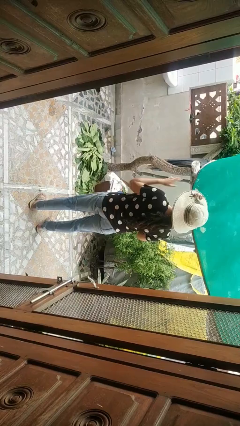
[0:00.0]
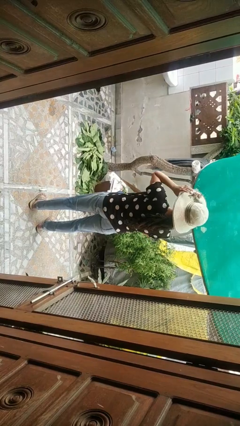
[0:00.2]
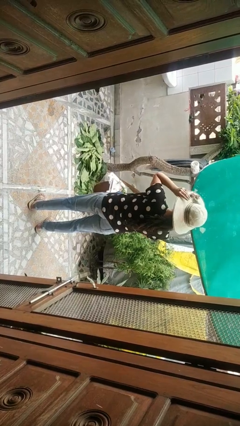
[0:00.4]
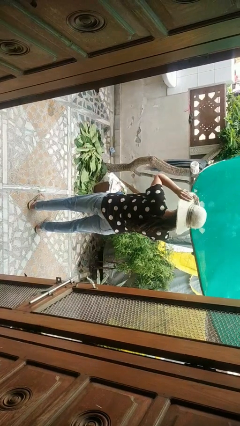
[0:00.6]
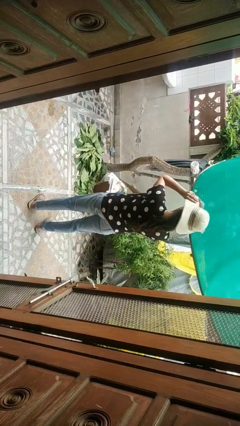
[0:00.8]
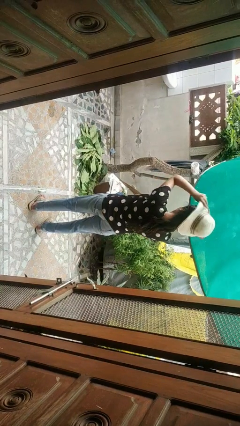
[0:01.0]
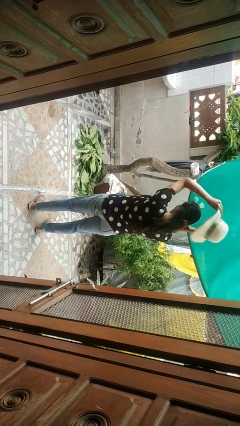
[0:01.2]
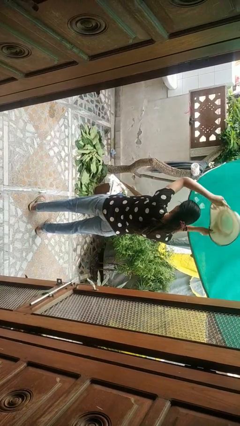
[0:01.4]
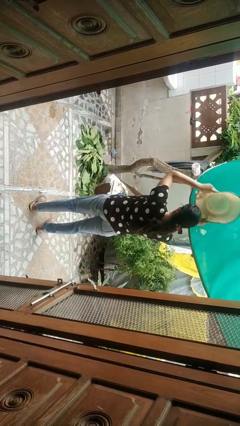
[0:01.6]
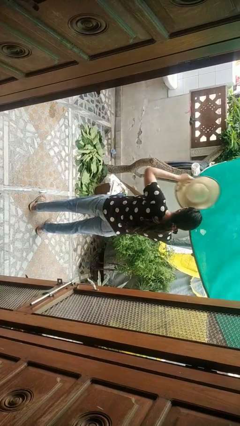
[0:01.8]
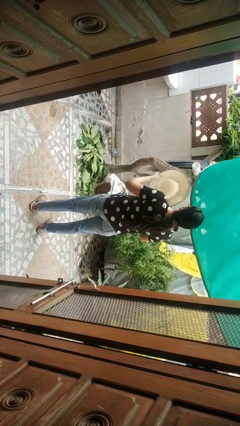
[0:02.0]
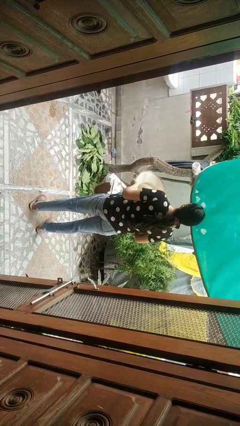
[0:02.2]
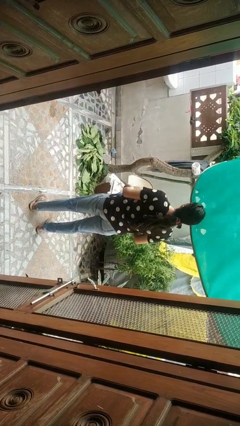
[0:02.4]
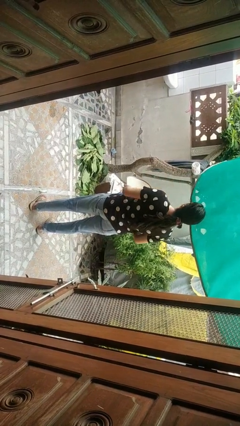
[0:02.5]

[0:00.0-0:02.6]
person takes off hat

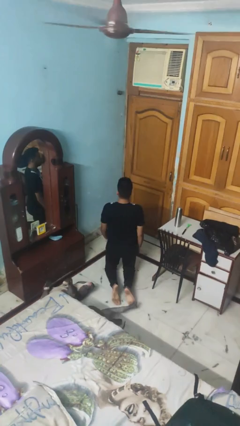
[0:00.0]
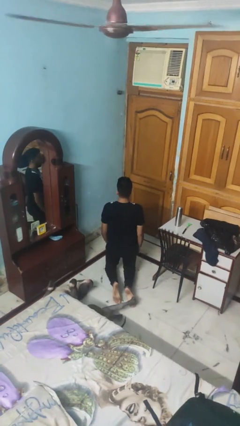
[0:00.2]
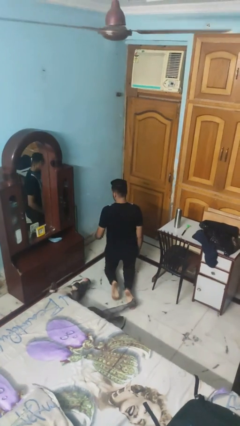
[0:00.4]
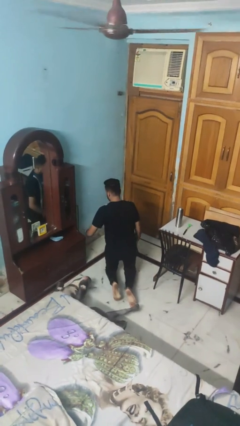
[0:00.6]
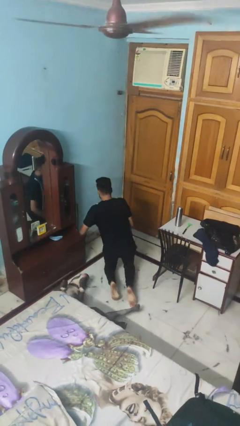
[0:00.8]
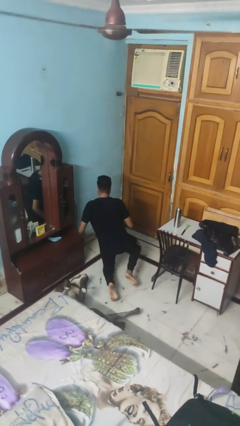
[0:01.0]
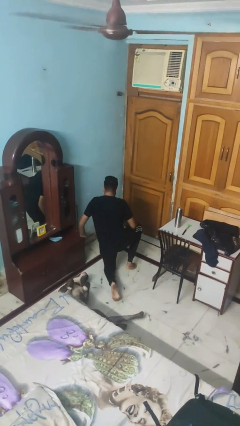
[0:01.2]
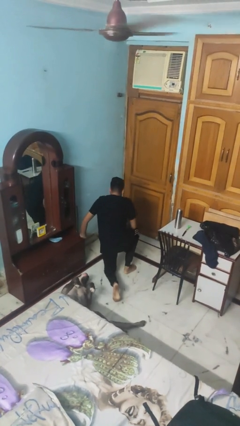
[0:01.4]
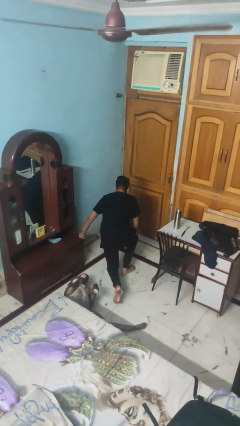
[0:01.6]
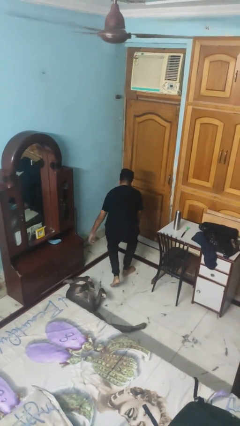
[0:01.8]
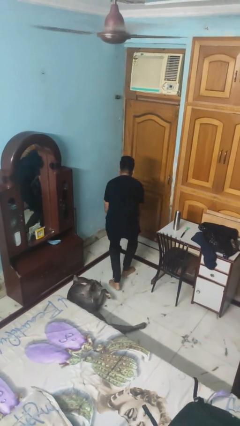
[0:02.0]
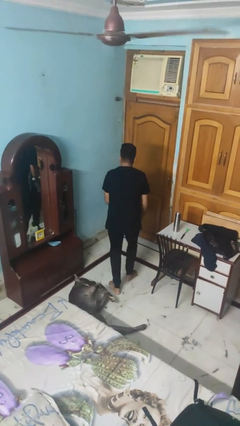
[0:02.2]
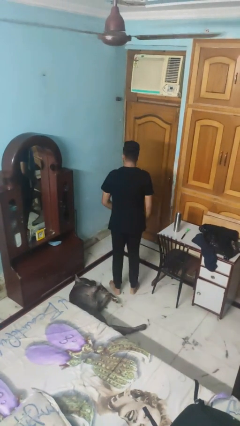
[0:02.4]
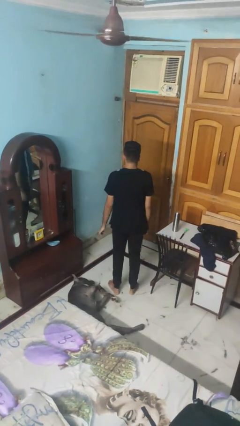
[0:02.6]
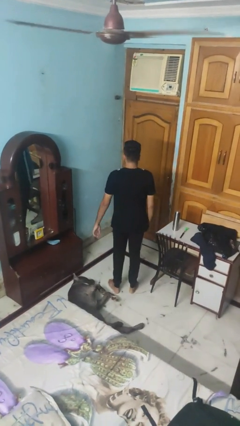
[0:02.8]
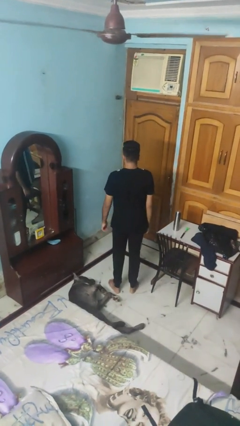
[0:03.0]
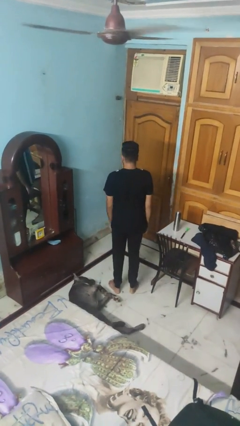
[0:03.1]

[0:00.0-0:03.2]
person stands up from floor

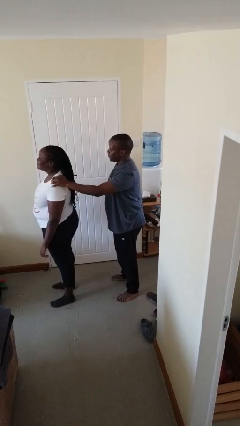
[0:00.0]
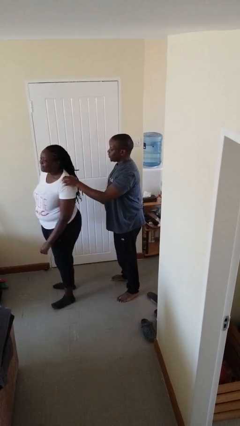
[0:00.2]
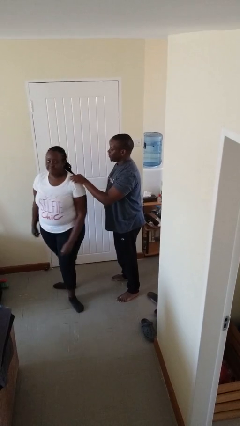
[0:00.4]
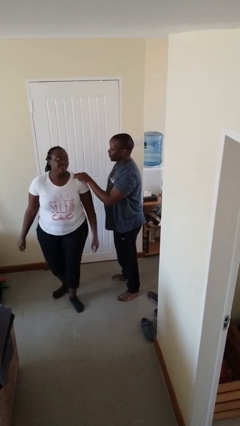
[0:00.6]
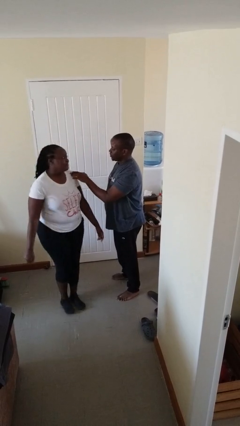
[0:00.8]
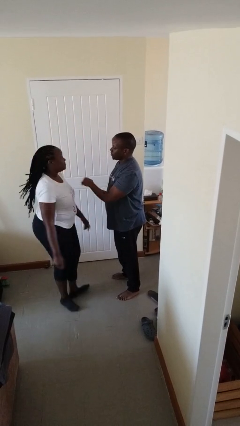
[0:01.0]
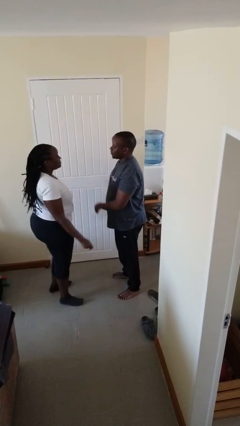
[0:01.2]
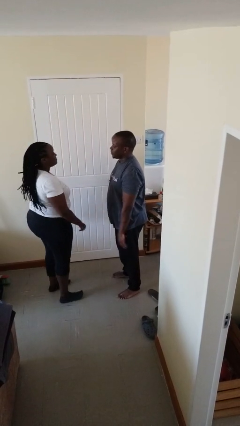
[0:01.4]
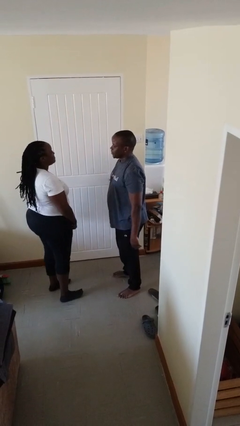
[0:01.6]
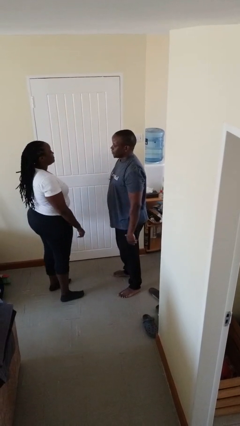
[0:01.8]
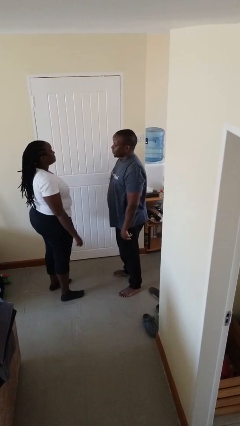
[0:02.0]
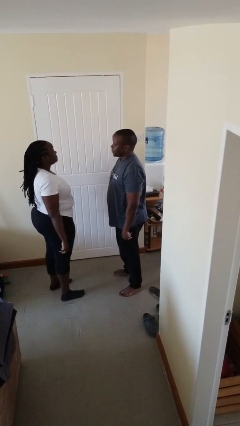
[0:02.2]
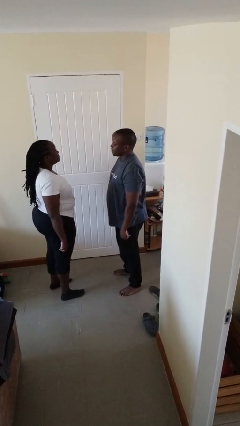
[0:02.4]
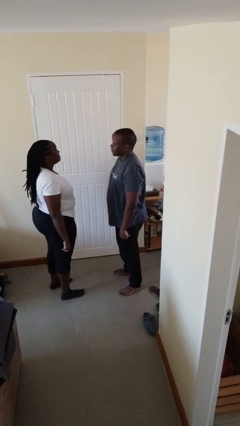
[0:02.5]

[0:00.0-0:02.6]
person spins person around

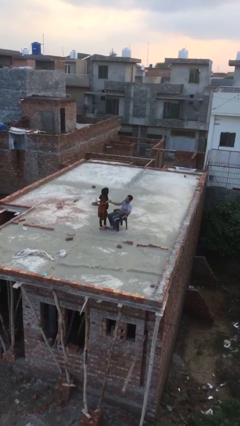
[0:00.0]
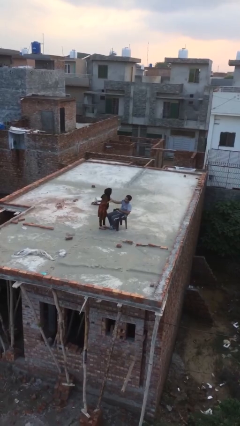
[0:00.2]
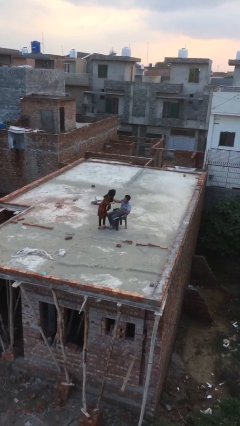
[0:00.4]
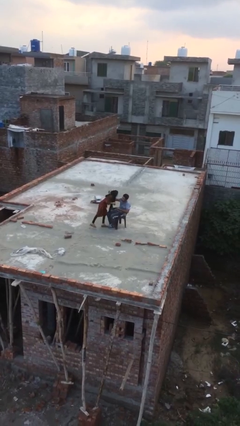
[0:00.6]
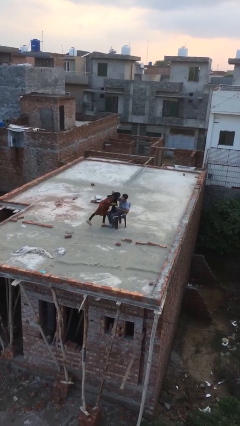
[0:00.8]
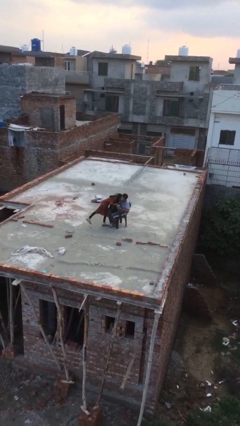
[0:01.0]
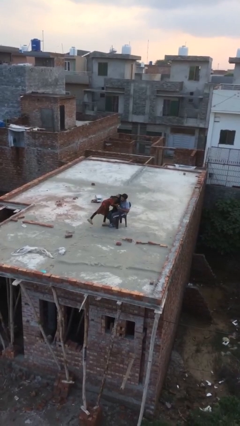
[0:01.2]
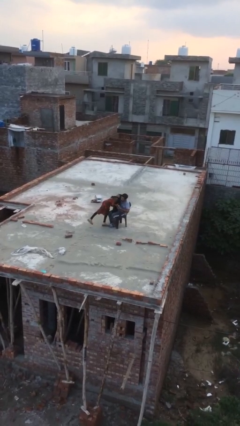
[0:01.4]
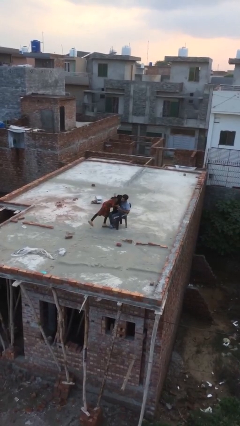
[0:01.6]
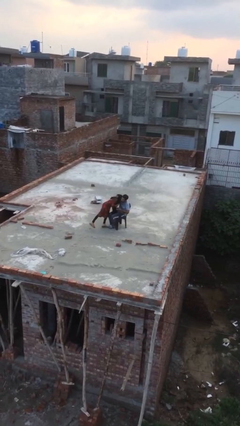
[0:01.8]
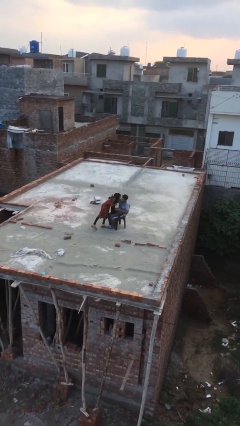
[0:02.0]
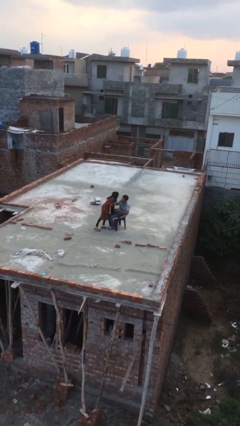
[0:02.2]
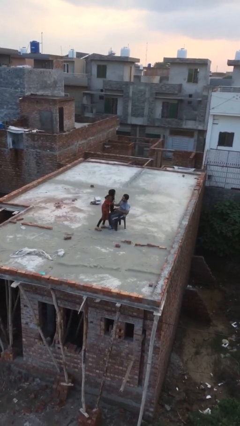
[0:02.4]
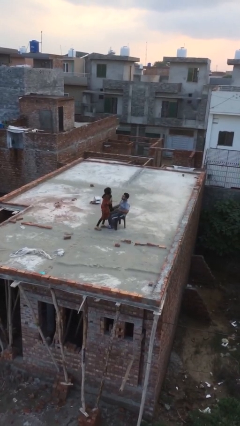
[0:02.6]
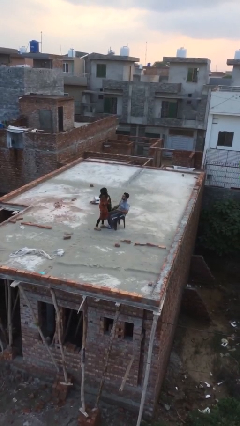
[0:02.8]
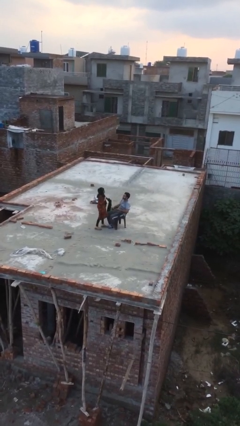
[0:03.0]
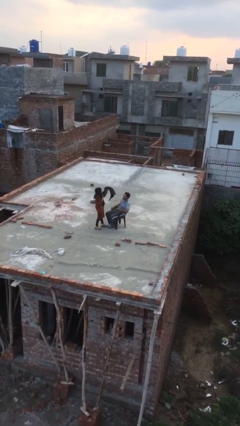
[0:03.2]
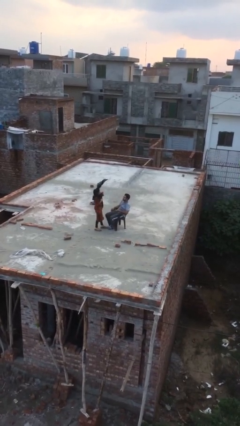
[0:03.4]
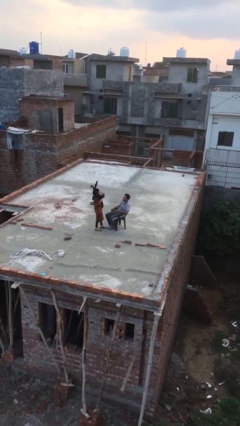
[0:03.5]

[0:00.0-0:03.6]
person embraces person

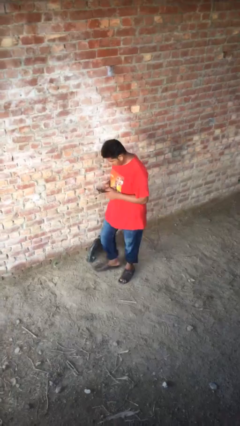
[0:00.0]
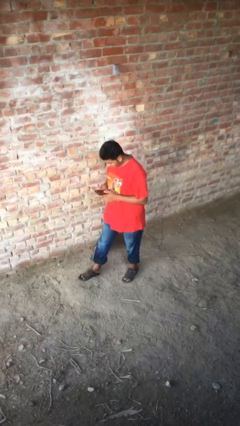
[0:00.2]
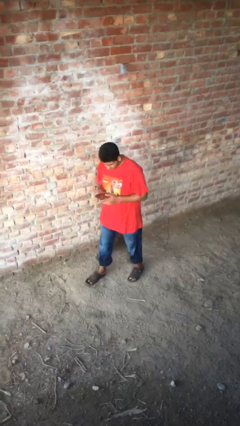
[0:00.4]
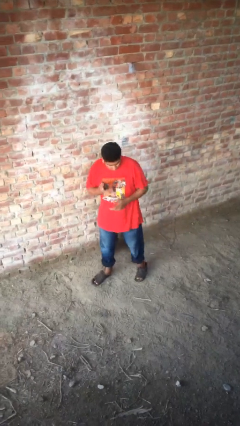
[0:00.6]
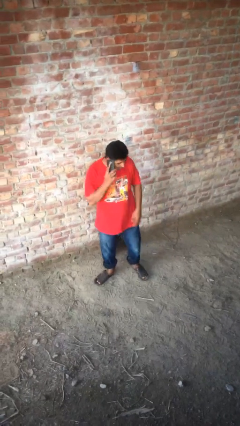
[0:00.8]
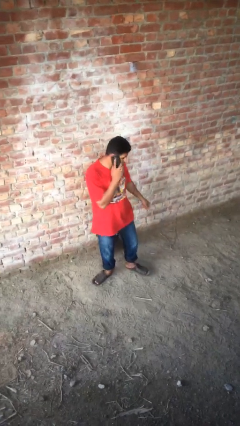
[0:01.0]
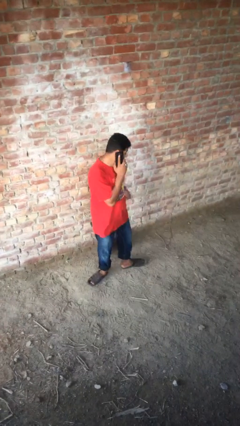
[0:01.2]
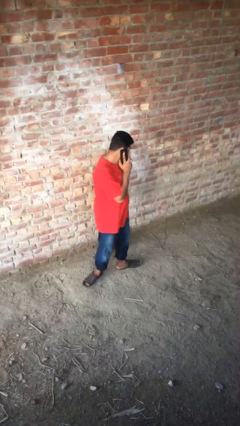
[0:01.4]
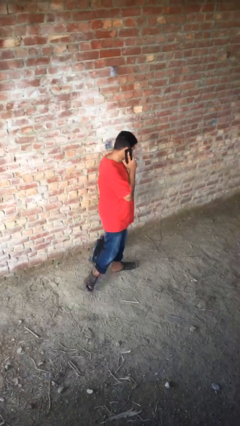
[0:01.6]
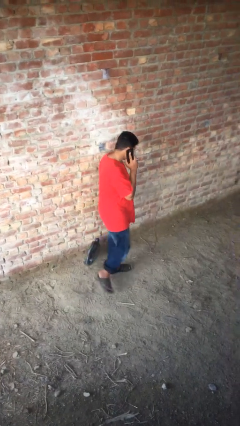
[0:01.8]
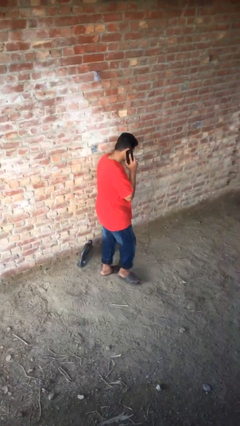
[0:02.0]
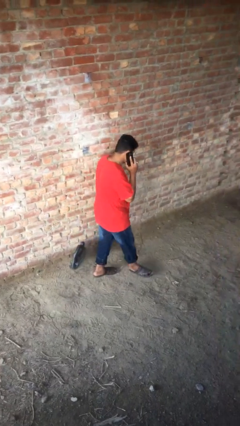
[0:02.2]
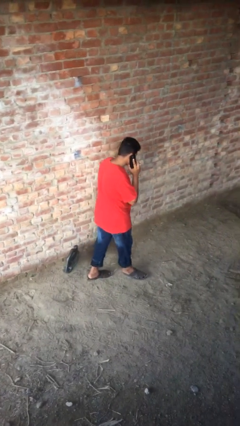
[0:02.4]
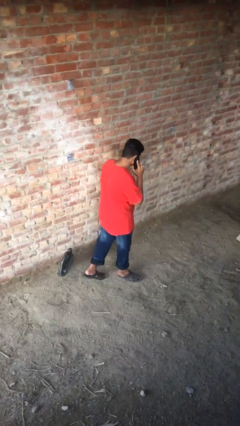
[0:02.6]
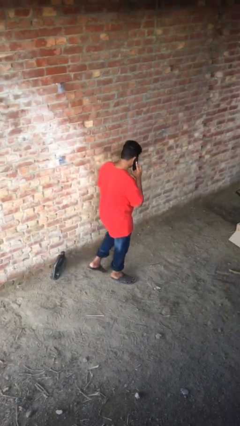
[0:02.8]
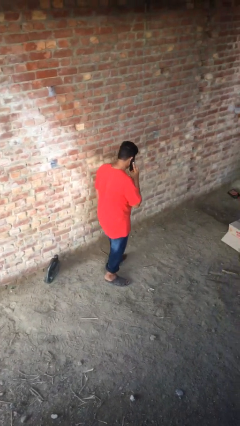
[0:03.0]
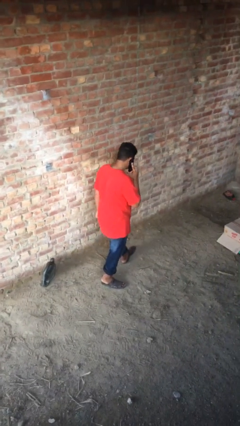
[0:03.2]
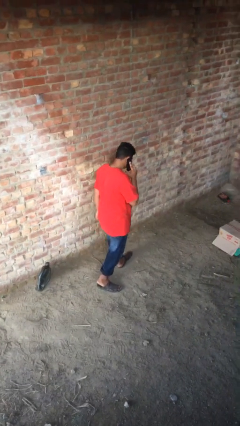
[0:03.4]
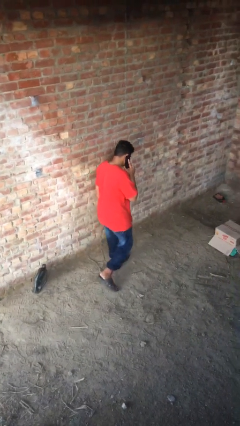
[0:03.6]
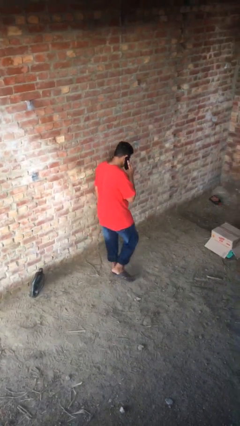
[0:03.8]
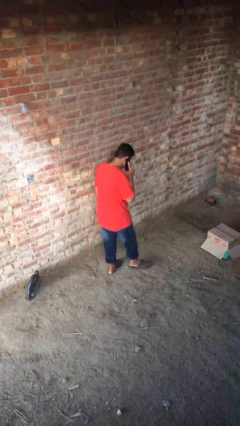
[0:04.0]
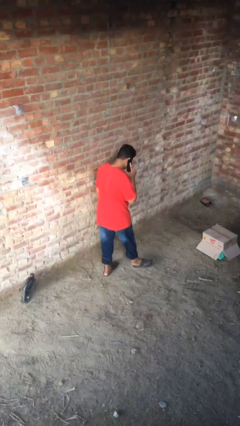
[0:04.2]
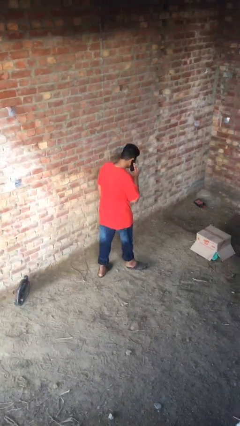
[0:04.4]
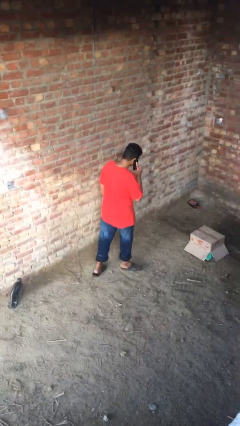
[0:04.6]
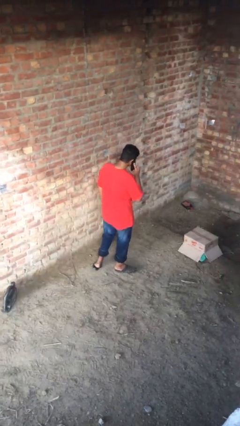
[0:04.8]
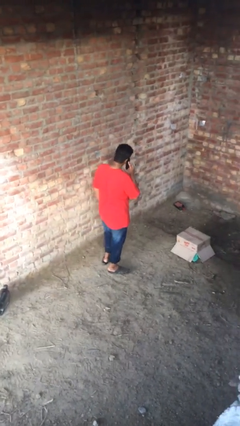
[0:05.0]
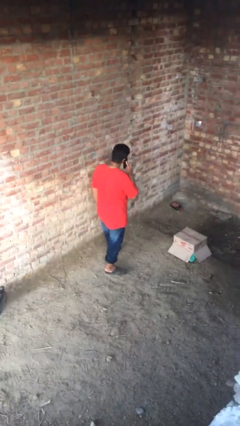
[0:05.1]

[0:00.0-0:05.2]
person talks on phone
